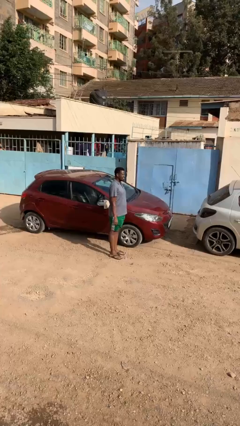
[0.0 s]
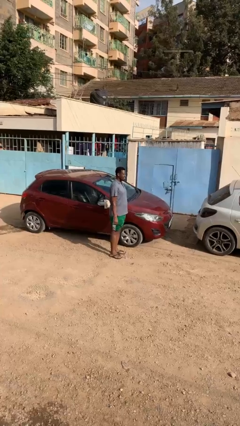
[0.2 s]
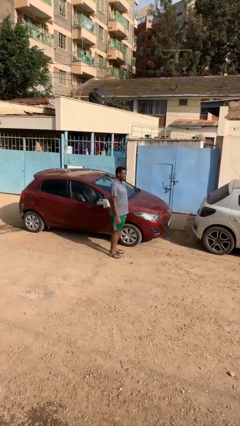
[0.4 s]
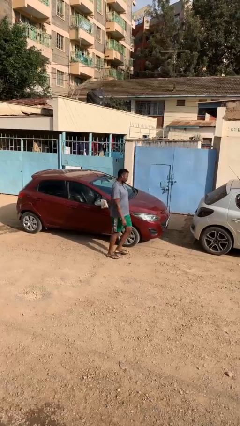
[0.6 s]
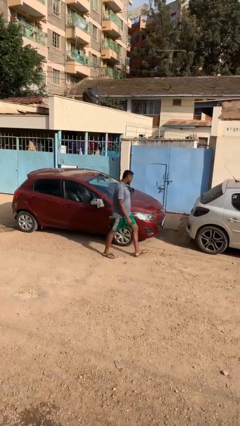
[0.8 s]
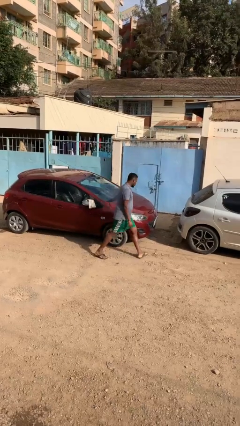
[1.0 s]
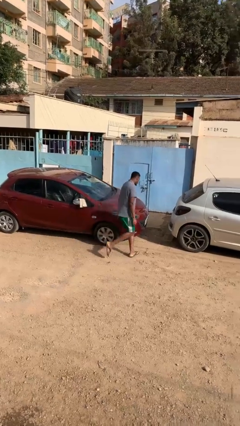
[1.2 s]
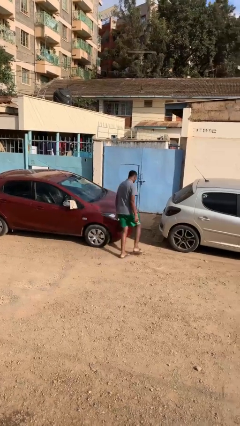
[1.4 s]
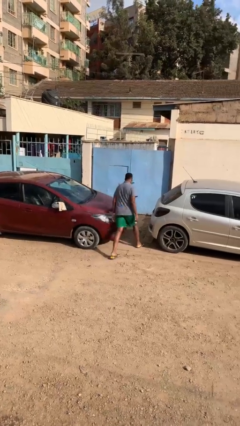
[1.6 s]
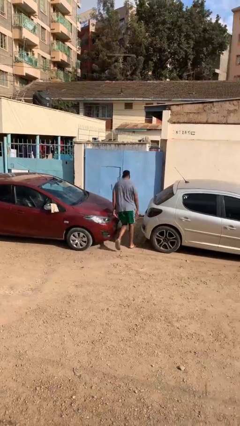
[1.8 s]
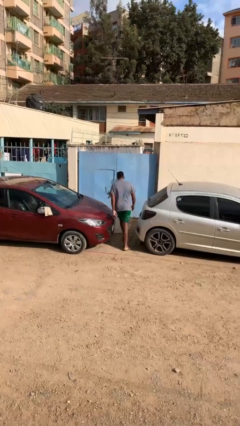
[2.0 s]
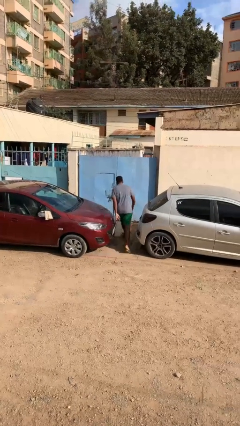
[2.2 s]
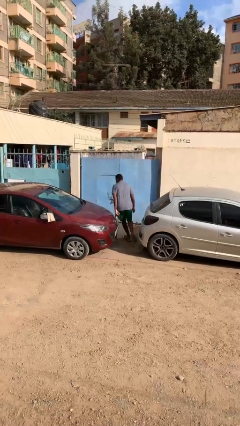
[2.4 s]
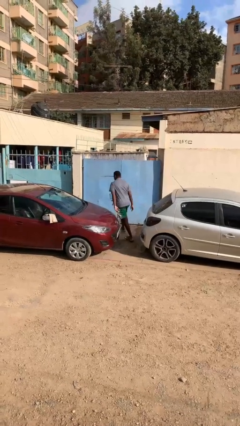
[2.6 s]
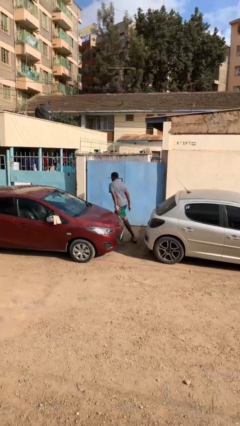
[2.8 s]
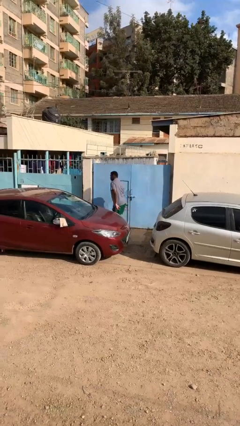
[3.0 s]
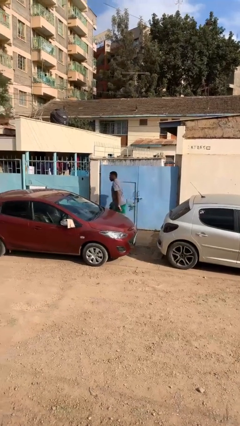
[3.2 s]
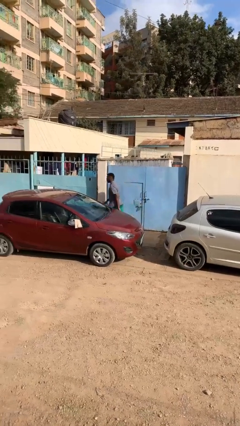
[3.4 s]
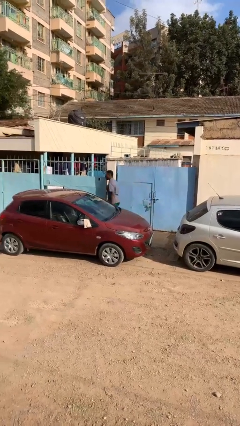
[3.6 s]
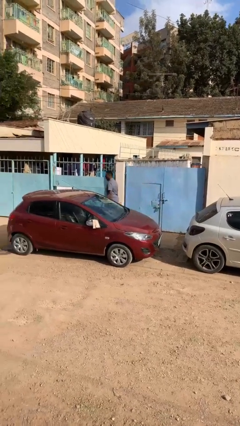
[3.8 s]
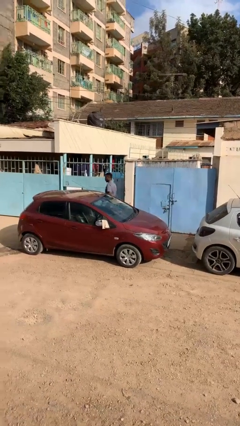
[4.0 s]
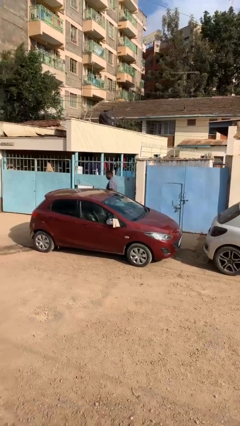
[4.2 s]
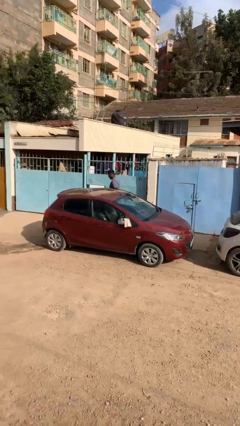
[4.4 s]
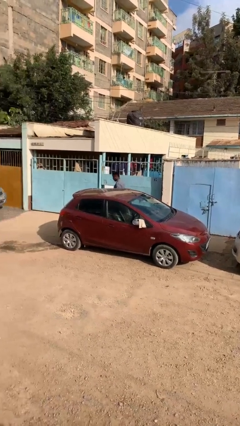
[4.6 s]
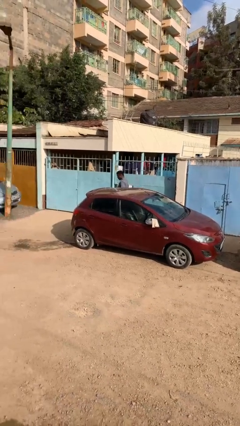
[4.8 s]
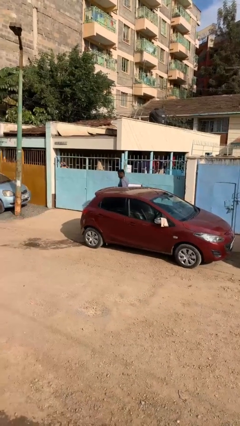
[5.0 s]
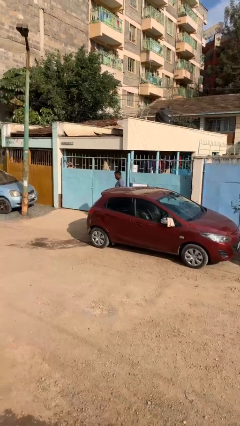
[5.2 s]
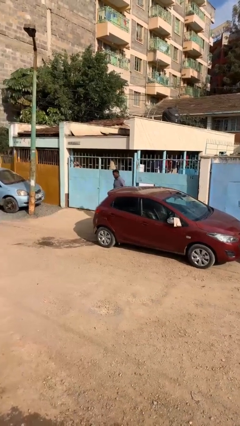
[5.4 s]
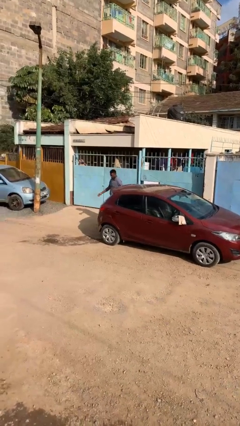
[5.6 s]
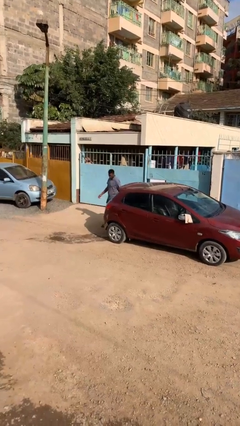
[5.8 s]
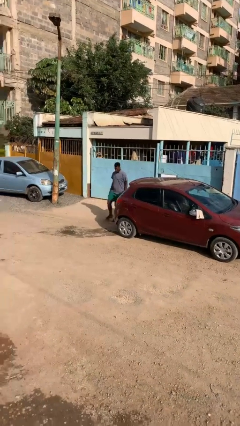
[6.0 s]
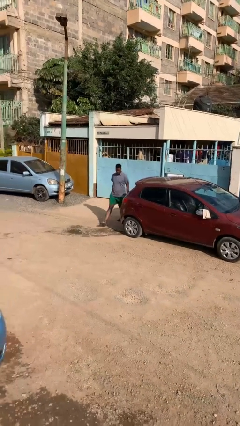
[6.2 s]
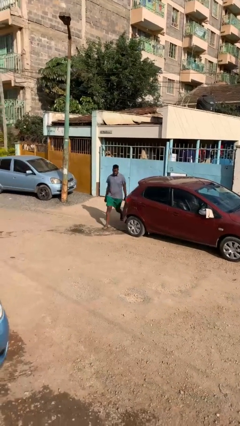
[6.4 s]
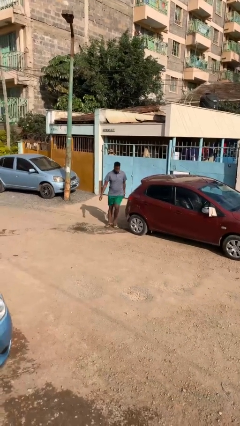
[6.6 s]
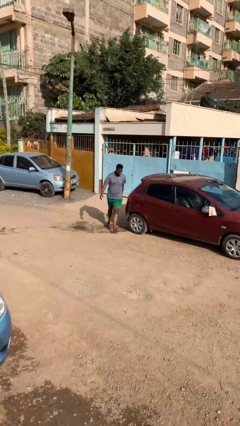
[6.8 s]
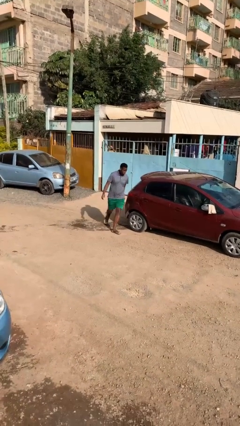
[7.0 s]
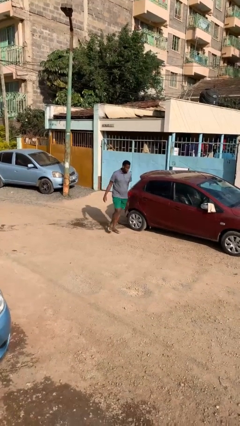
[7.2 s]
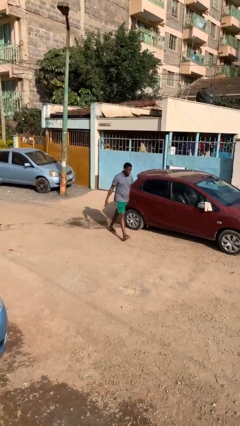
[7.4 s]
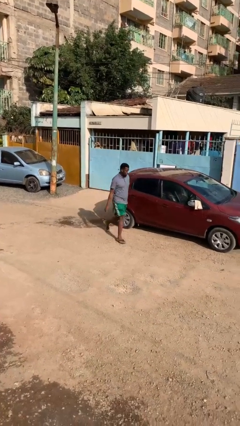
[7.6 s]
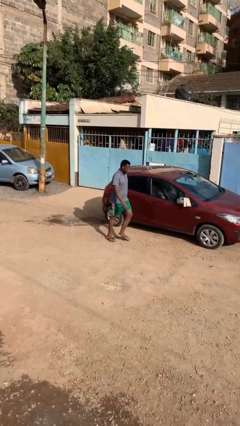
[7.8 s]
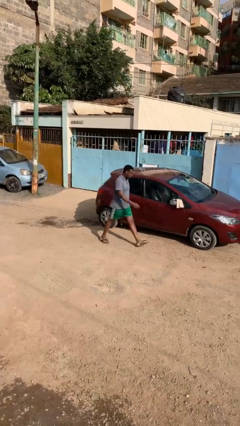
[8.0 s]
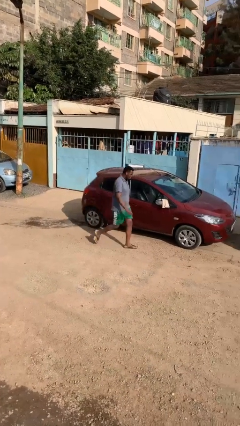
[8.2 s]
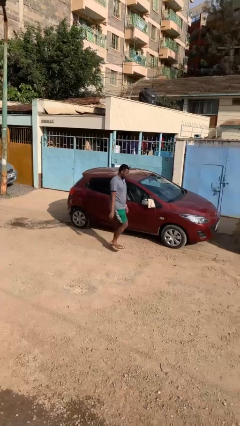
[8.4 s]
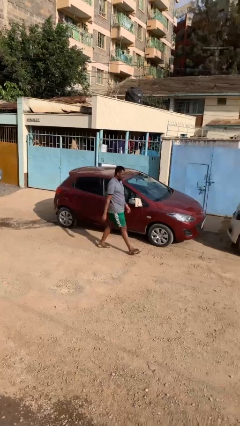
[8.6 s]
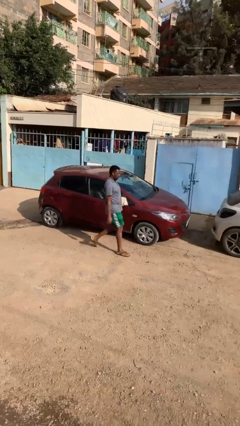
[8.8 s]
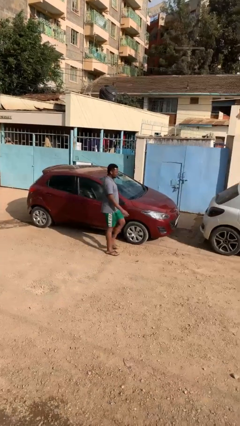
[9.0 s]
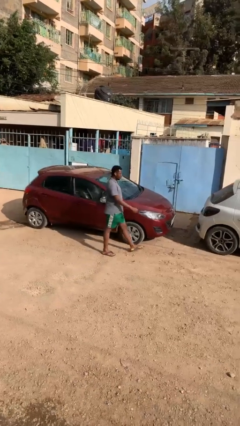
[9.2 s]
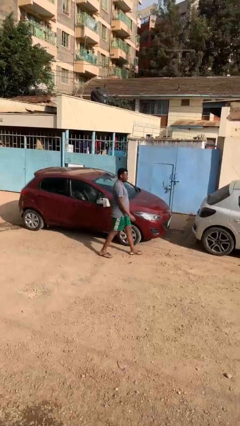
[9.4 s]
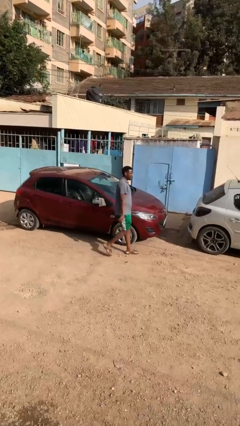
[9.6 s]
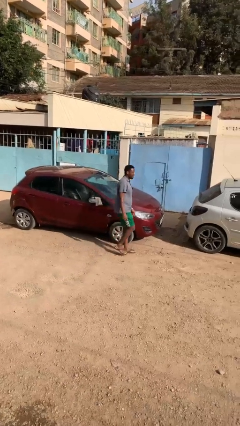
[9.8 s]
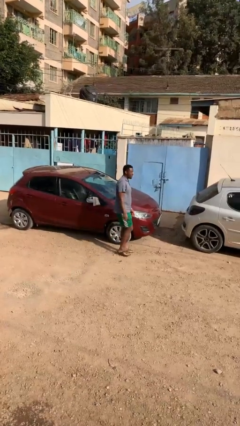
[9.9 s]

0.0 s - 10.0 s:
person walks around car

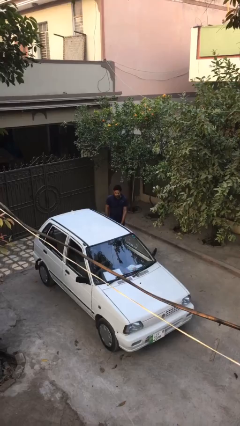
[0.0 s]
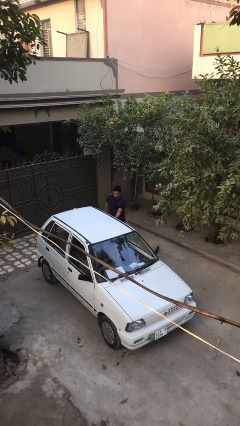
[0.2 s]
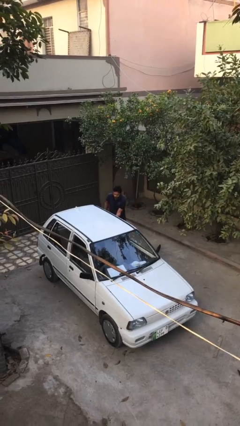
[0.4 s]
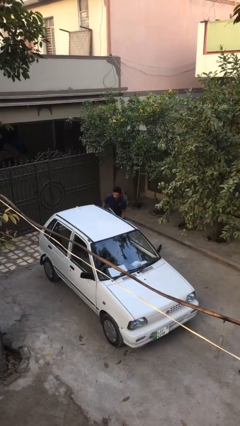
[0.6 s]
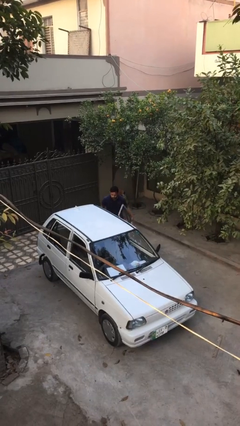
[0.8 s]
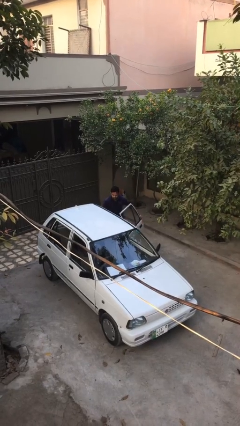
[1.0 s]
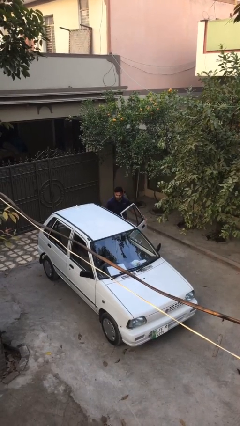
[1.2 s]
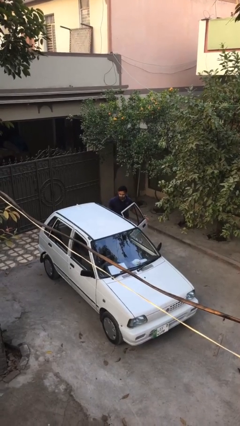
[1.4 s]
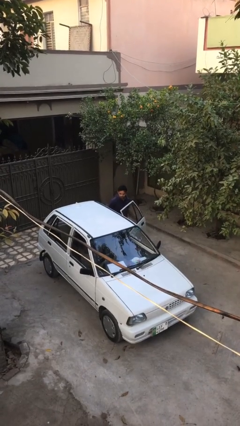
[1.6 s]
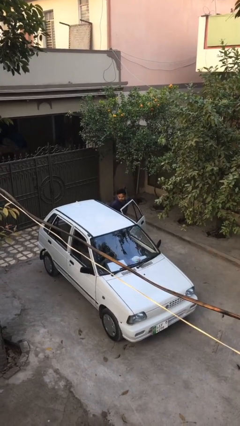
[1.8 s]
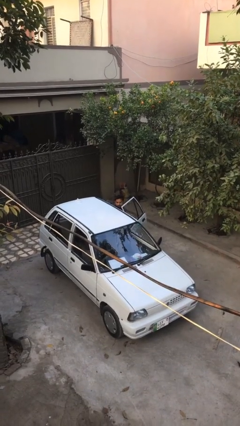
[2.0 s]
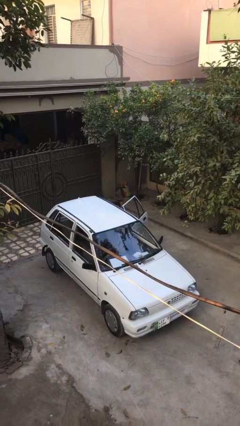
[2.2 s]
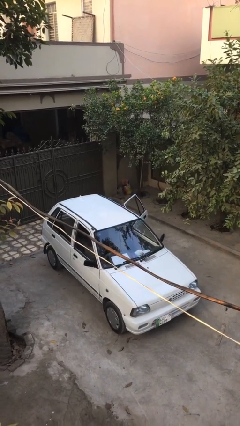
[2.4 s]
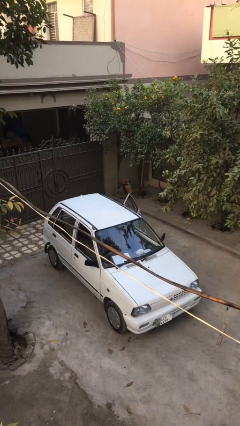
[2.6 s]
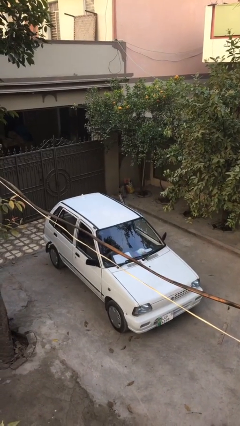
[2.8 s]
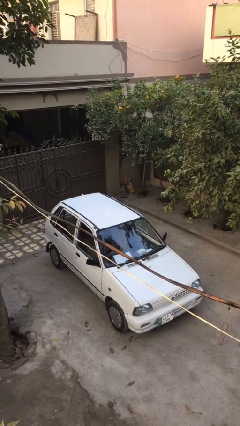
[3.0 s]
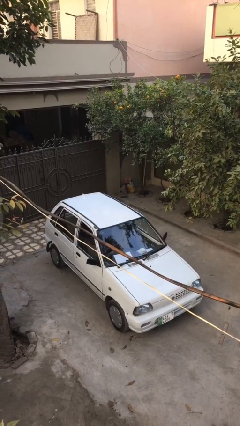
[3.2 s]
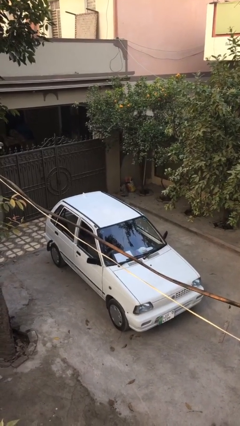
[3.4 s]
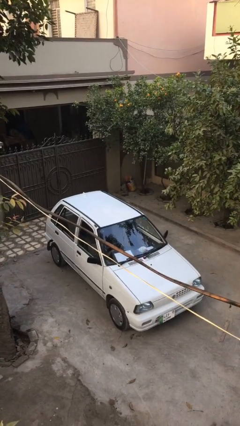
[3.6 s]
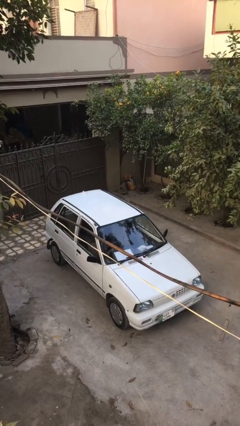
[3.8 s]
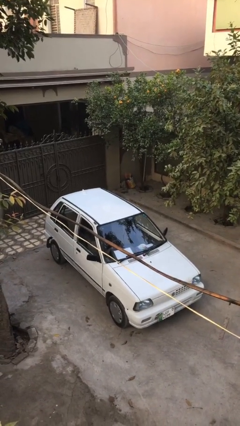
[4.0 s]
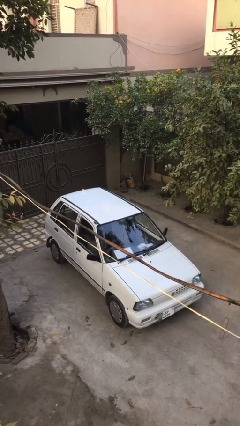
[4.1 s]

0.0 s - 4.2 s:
person enters car

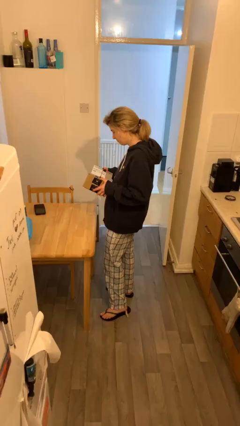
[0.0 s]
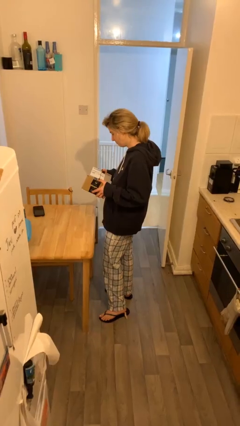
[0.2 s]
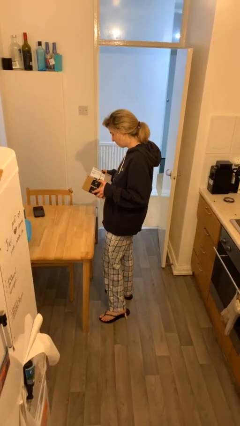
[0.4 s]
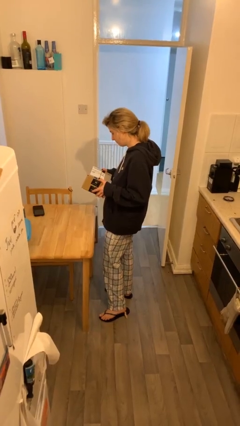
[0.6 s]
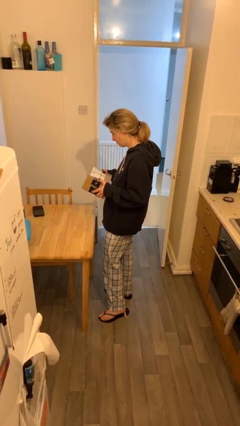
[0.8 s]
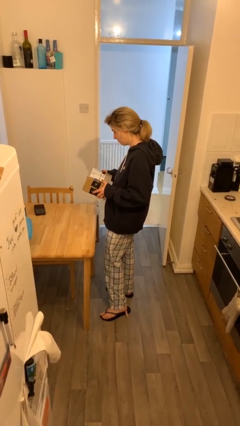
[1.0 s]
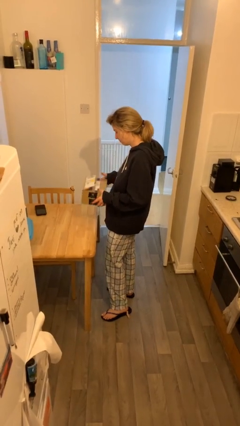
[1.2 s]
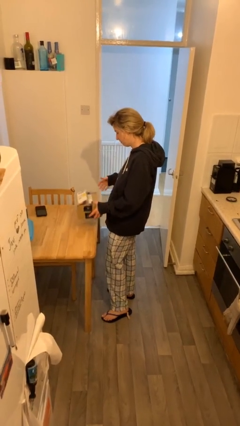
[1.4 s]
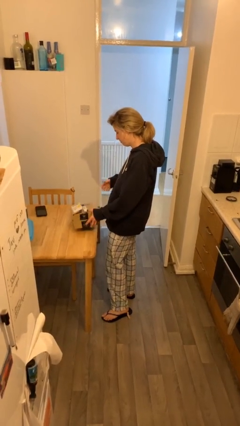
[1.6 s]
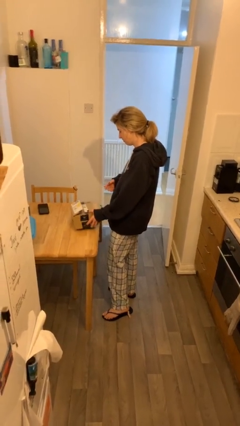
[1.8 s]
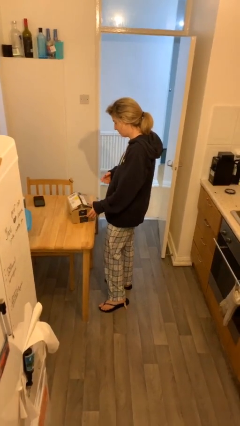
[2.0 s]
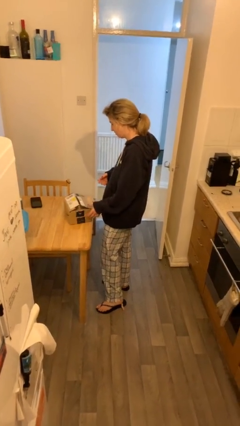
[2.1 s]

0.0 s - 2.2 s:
person puts down object on table

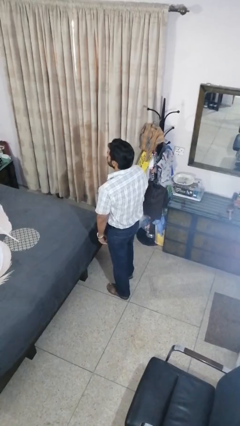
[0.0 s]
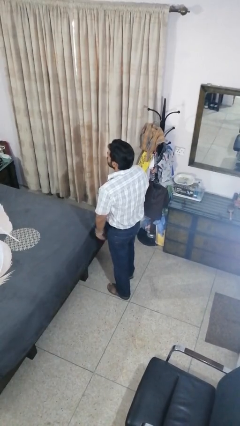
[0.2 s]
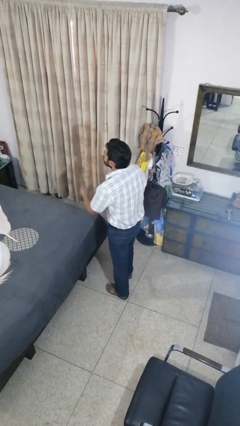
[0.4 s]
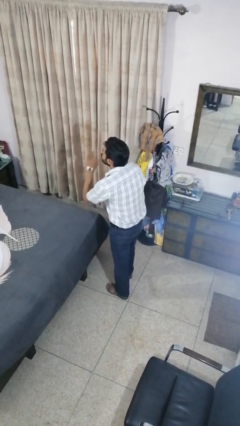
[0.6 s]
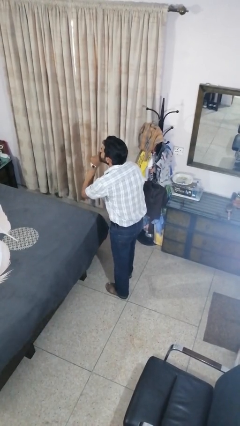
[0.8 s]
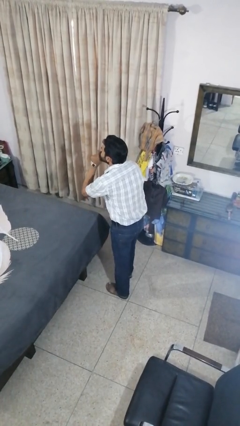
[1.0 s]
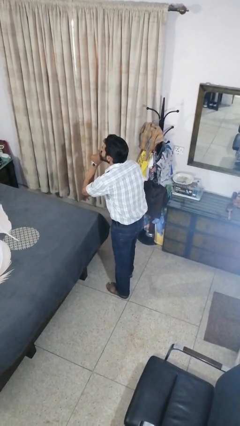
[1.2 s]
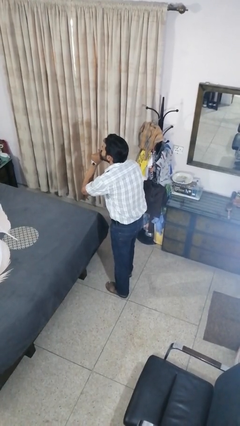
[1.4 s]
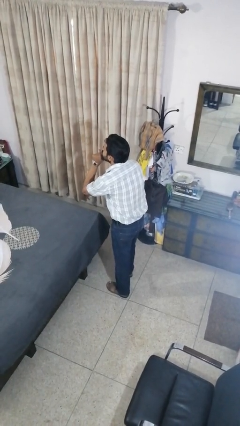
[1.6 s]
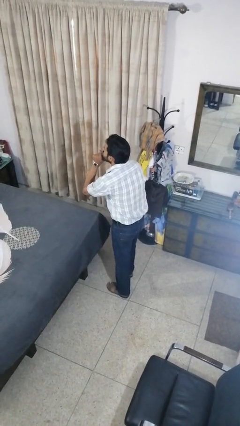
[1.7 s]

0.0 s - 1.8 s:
person gestures be quiet
